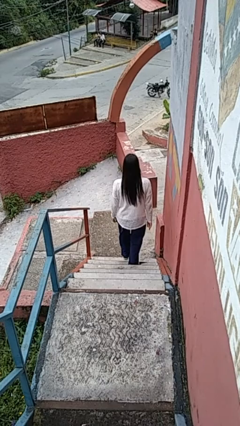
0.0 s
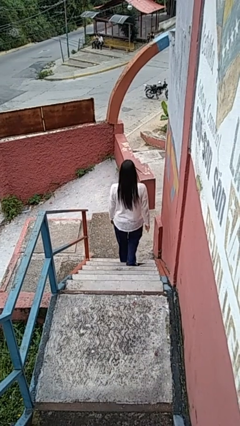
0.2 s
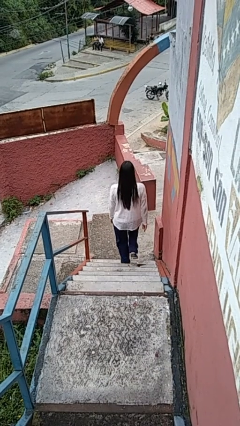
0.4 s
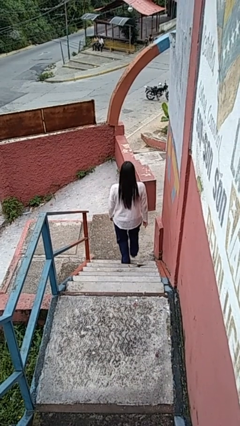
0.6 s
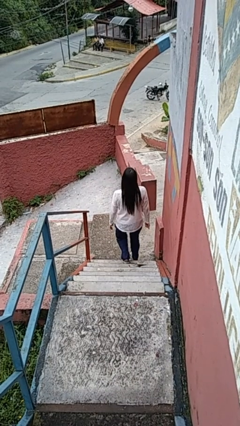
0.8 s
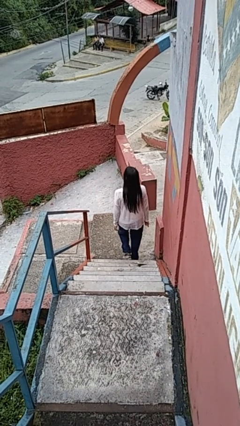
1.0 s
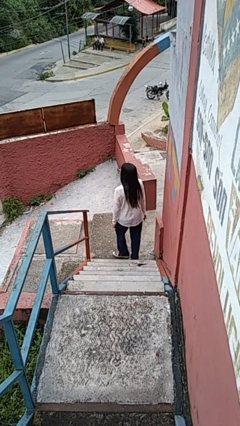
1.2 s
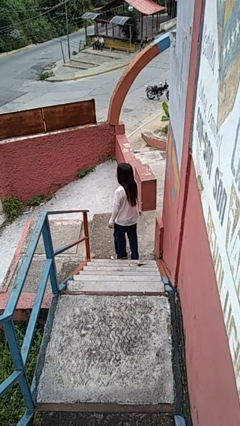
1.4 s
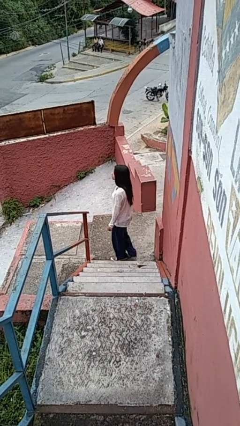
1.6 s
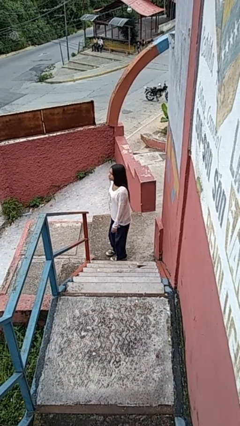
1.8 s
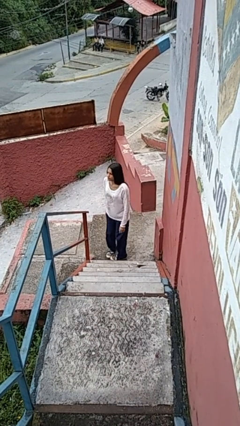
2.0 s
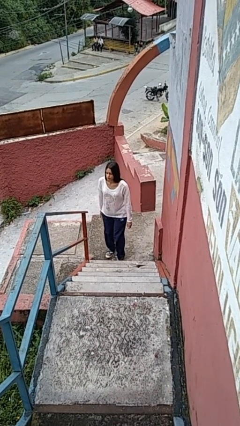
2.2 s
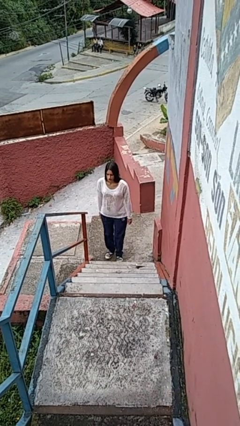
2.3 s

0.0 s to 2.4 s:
person climbs down stairs

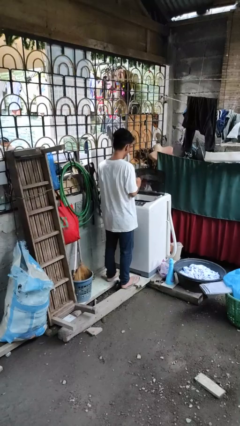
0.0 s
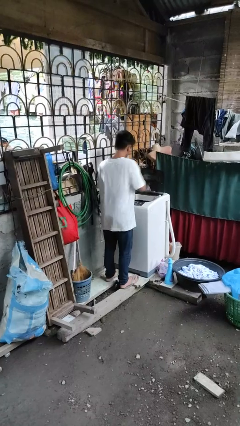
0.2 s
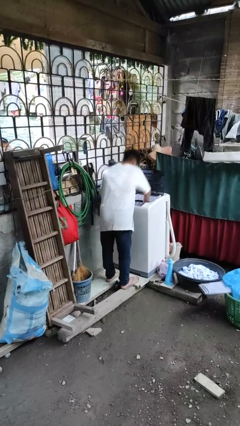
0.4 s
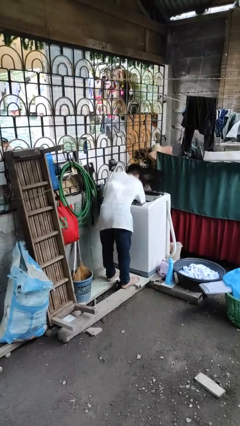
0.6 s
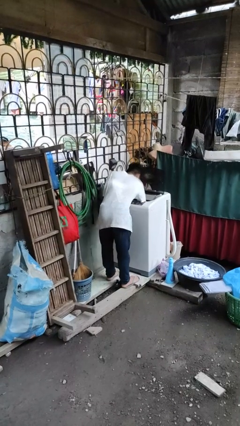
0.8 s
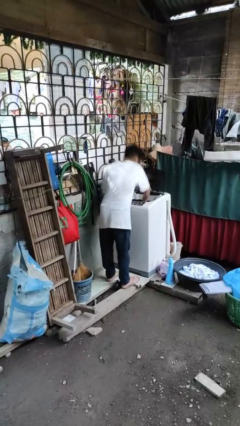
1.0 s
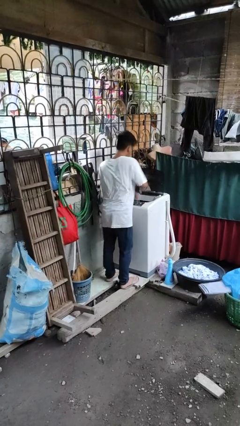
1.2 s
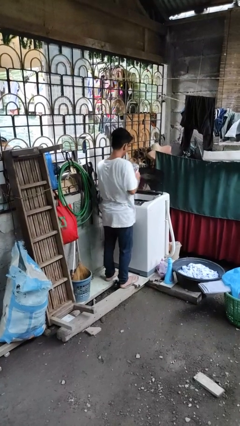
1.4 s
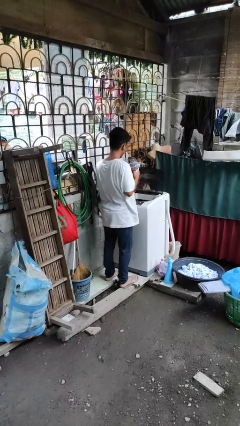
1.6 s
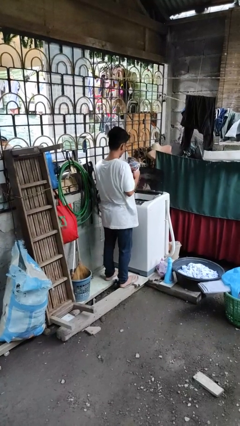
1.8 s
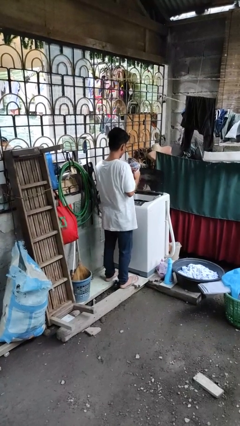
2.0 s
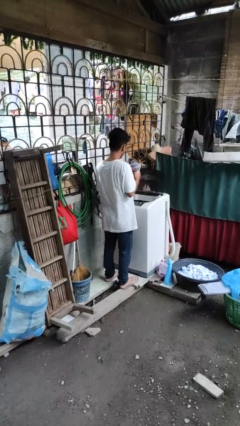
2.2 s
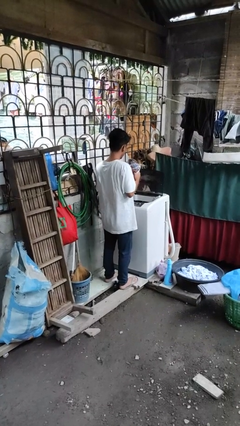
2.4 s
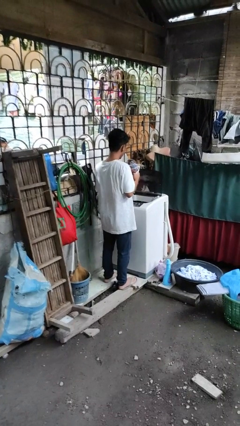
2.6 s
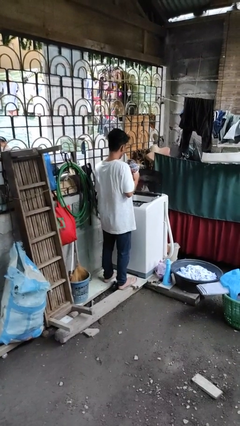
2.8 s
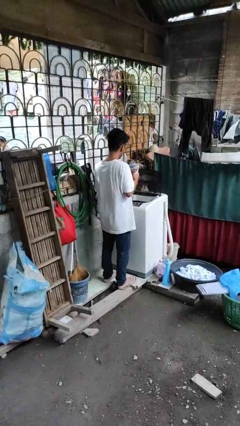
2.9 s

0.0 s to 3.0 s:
person unloads clotheswasher

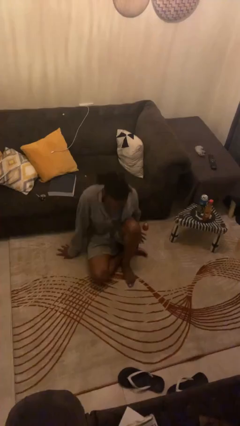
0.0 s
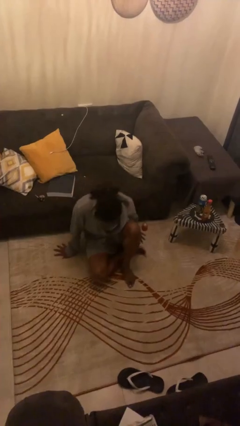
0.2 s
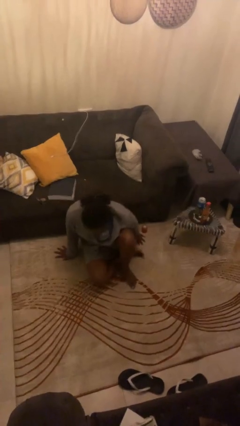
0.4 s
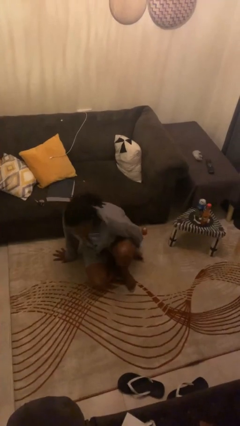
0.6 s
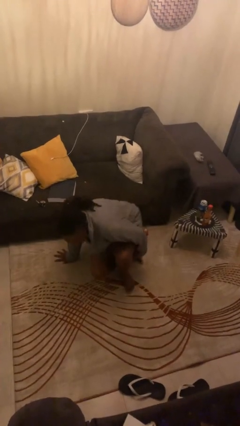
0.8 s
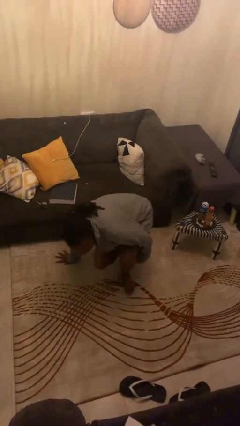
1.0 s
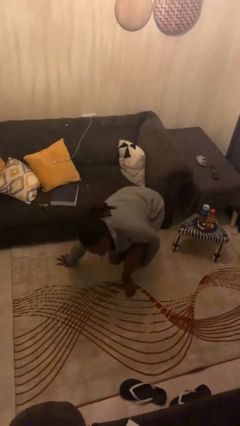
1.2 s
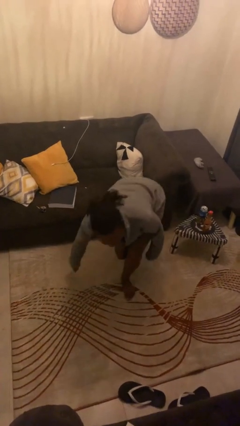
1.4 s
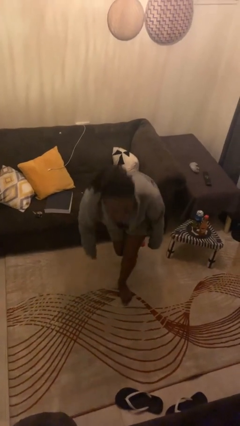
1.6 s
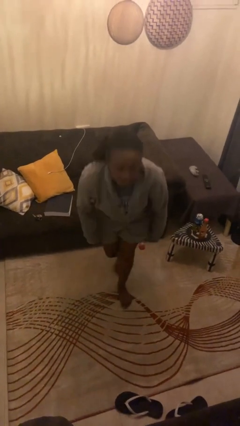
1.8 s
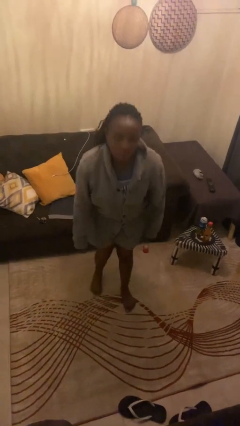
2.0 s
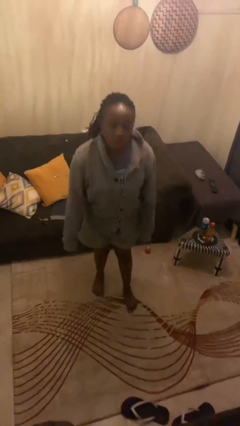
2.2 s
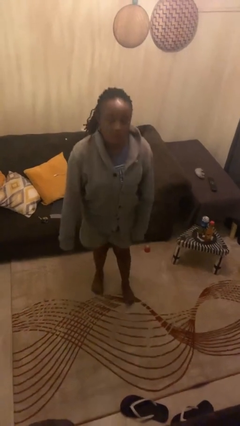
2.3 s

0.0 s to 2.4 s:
person stands up from floor

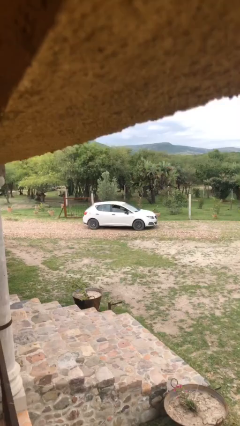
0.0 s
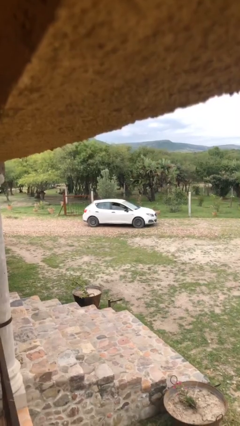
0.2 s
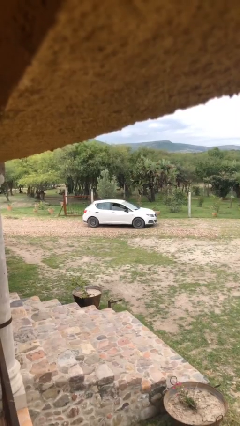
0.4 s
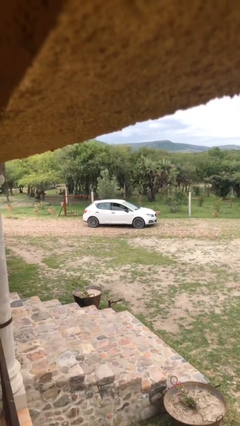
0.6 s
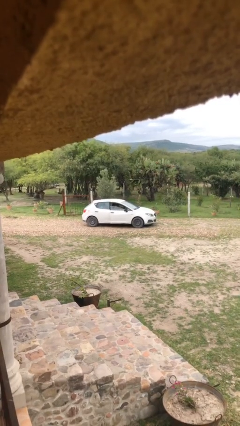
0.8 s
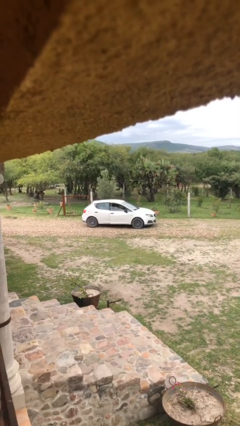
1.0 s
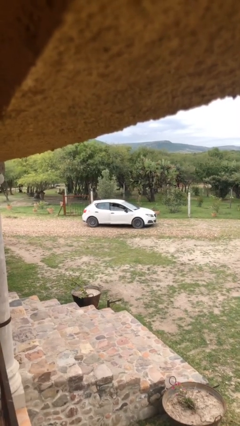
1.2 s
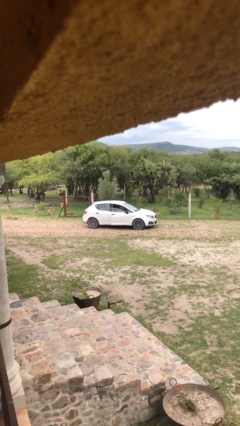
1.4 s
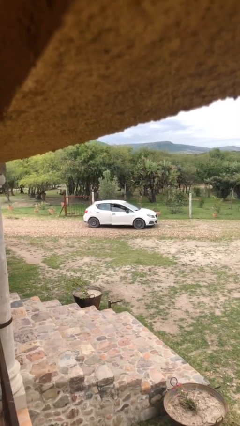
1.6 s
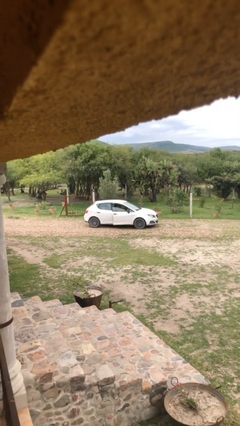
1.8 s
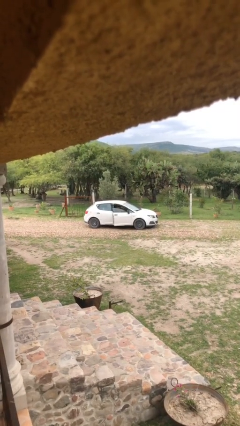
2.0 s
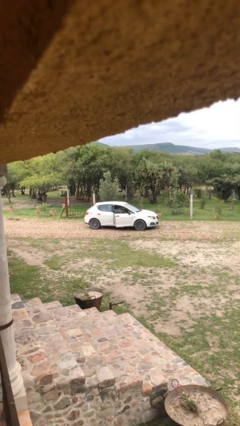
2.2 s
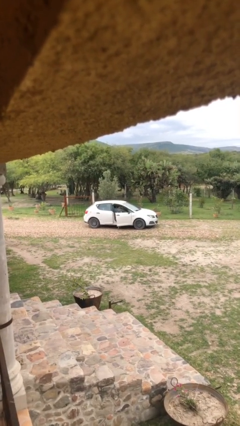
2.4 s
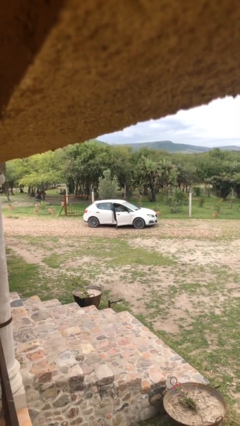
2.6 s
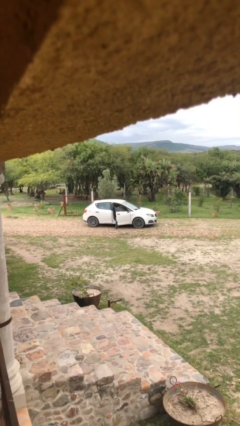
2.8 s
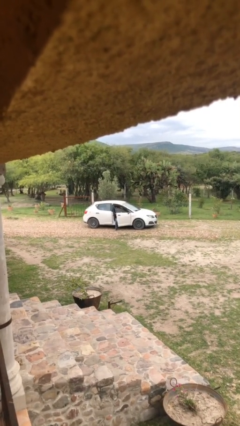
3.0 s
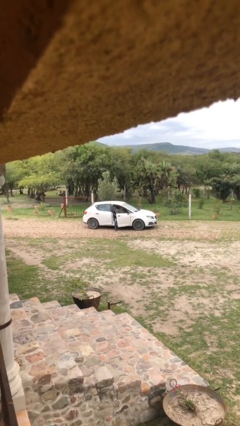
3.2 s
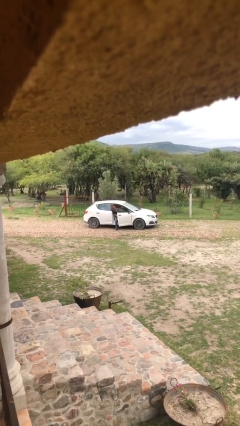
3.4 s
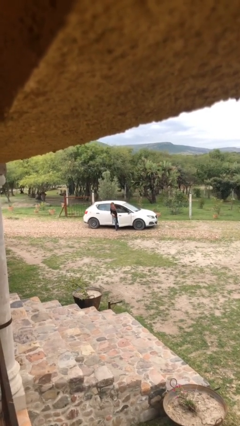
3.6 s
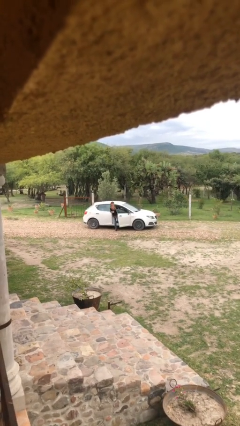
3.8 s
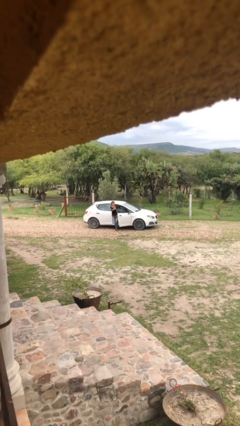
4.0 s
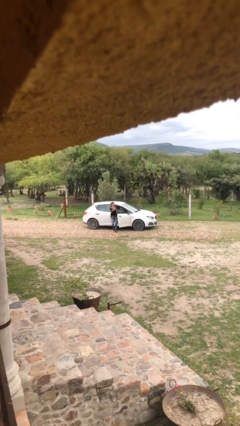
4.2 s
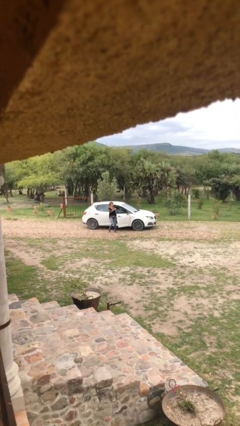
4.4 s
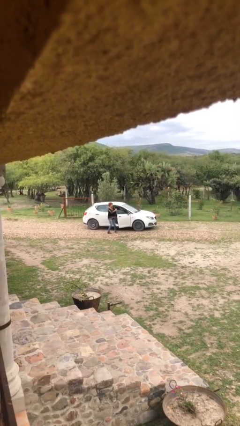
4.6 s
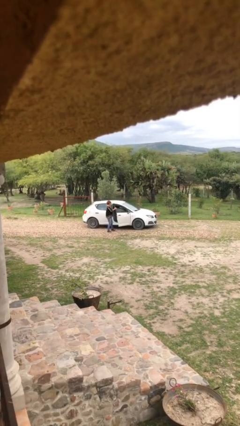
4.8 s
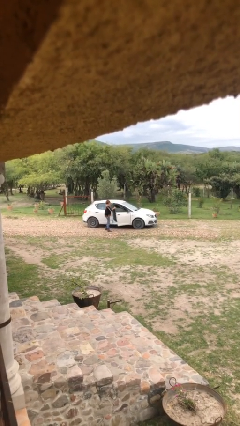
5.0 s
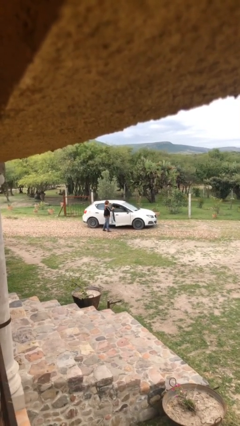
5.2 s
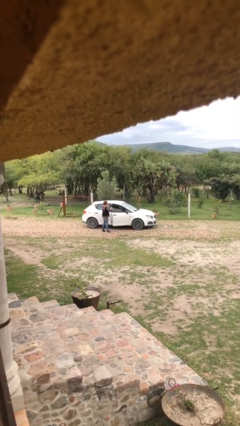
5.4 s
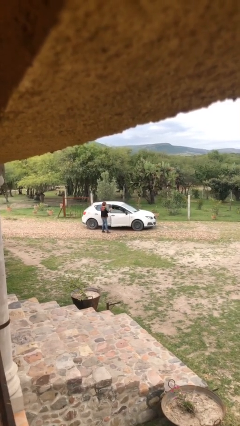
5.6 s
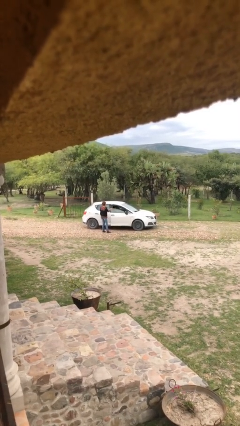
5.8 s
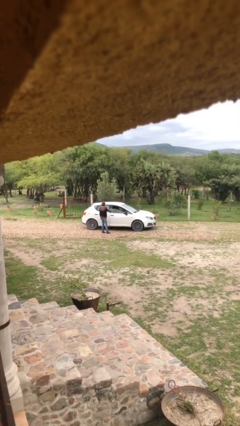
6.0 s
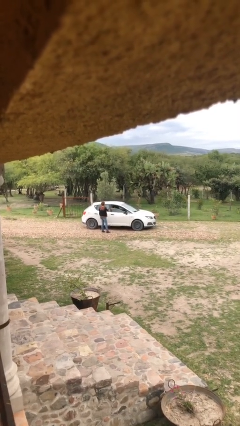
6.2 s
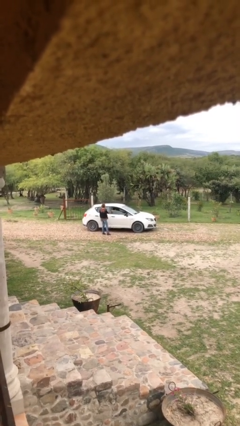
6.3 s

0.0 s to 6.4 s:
car drops off person

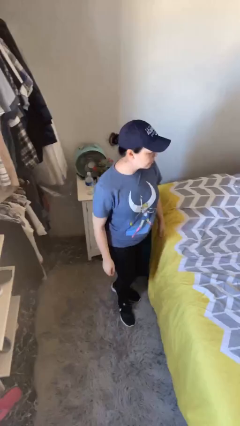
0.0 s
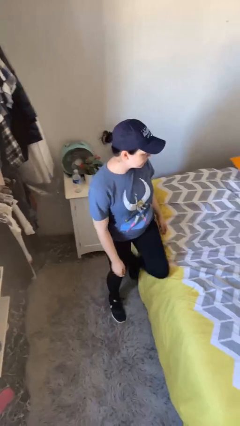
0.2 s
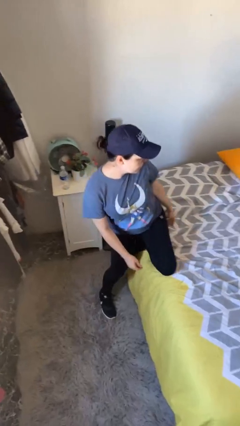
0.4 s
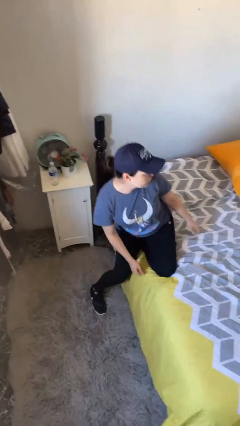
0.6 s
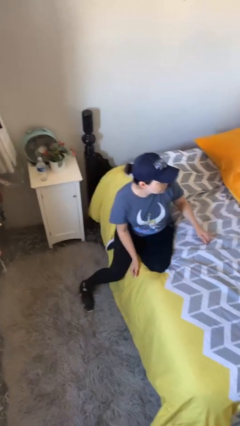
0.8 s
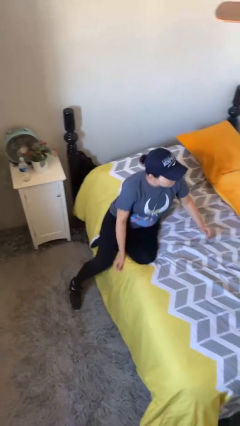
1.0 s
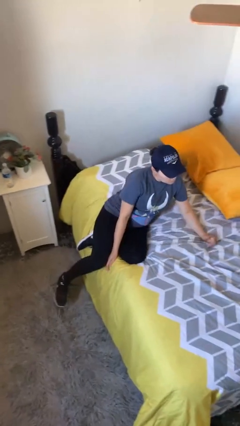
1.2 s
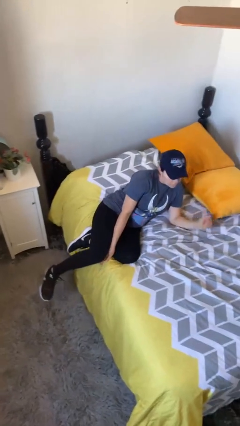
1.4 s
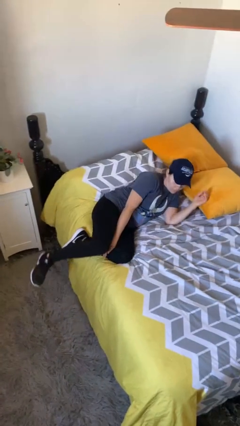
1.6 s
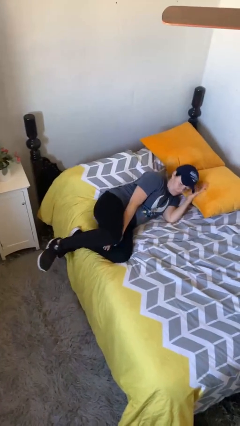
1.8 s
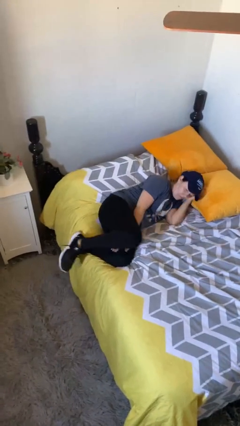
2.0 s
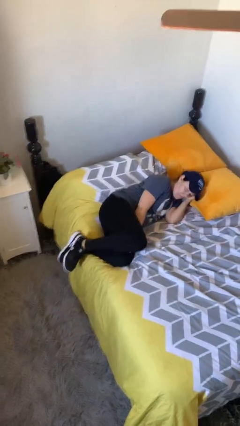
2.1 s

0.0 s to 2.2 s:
person lies down on bed

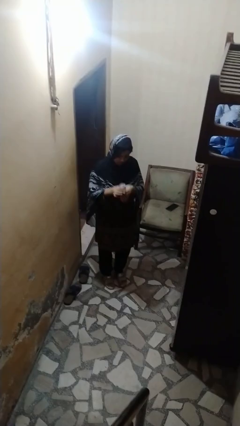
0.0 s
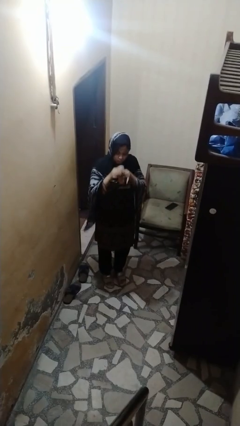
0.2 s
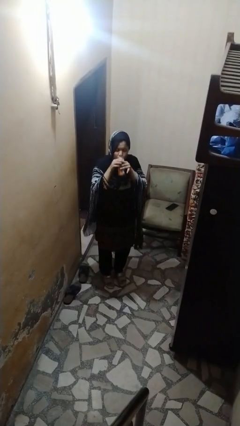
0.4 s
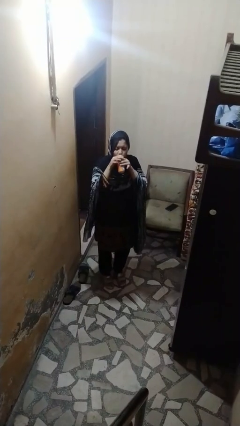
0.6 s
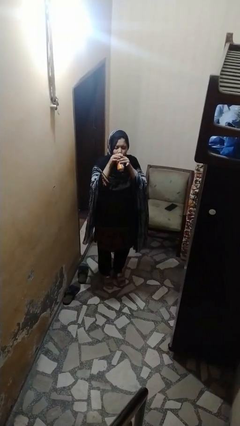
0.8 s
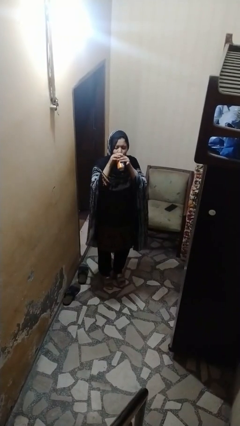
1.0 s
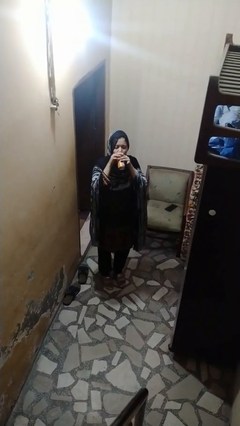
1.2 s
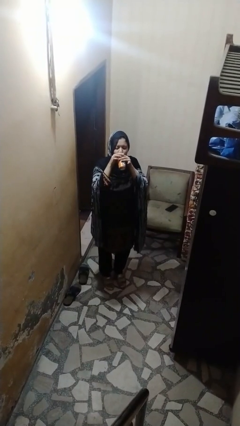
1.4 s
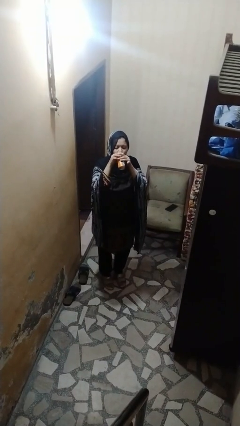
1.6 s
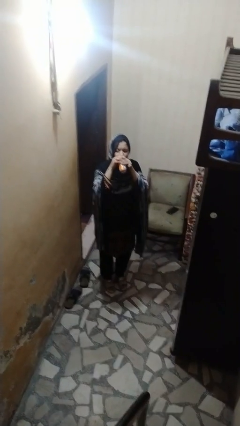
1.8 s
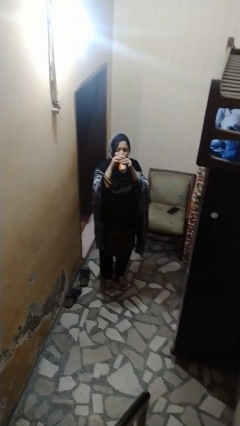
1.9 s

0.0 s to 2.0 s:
person drinks from beverage can
